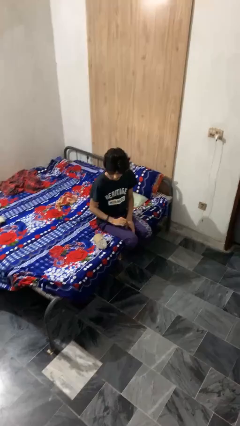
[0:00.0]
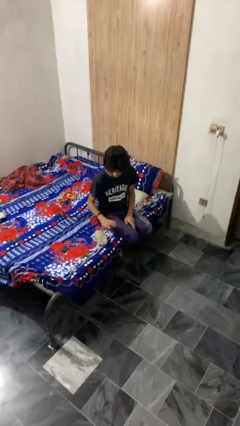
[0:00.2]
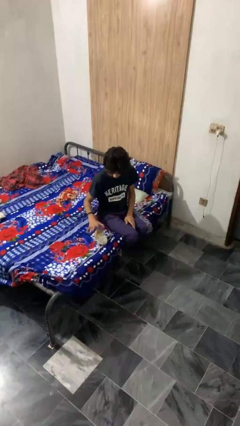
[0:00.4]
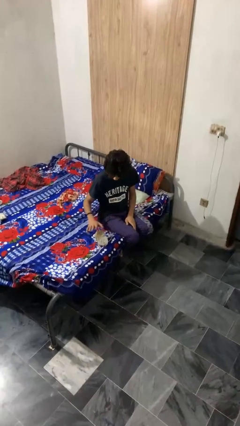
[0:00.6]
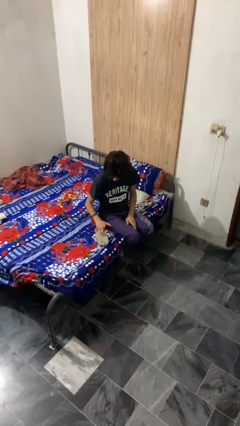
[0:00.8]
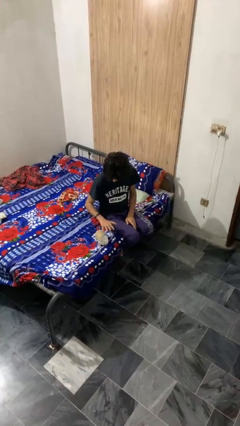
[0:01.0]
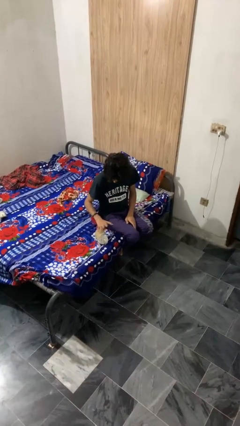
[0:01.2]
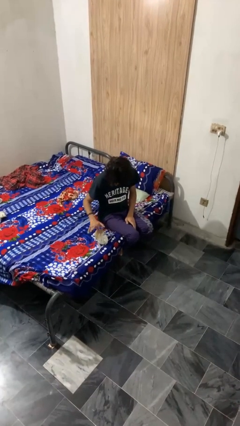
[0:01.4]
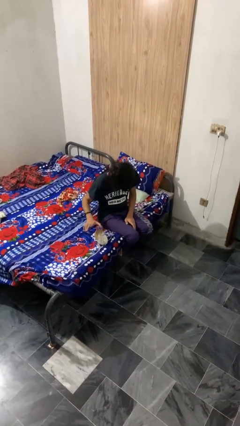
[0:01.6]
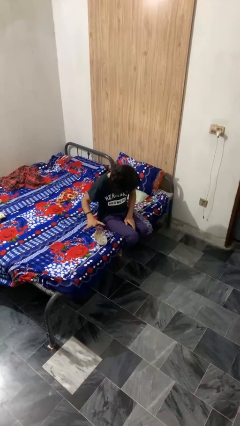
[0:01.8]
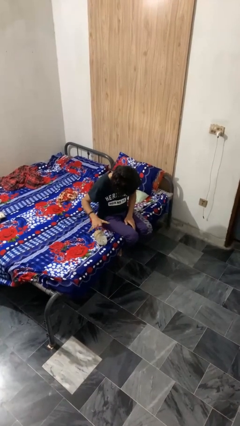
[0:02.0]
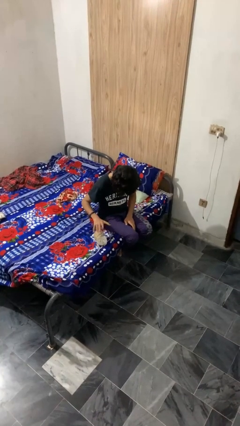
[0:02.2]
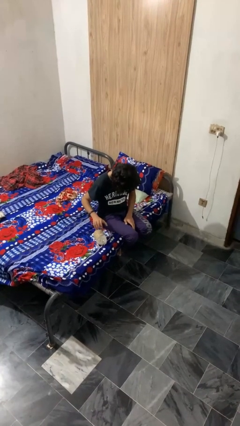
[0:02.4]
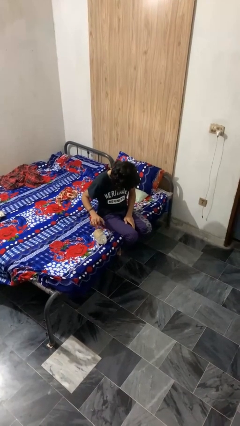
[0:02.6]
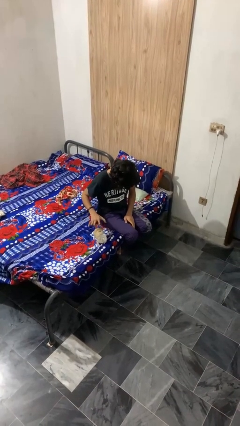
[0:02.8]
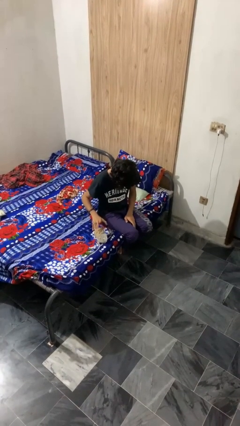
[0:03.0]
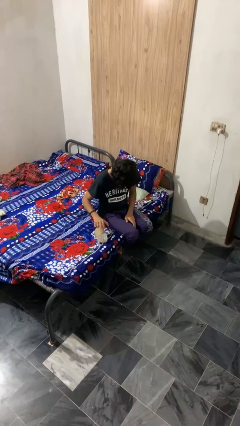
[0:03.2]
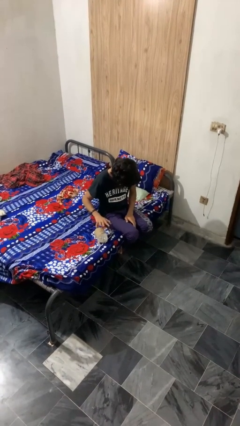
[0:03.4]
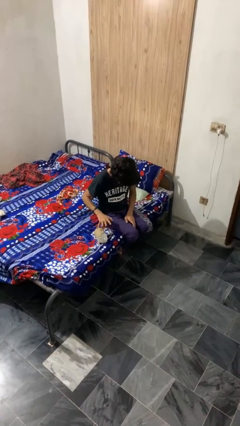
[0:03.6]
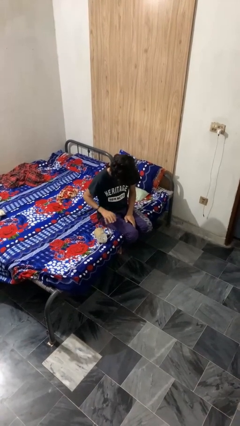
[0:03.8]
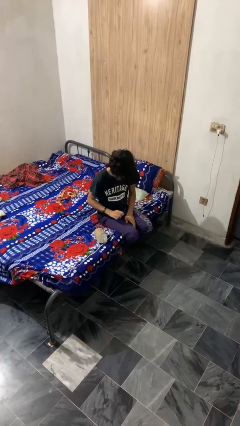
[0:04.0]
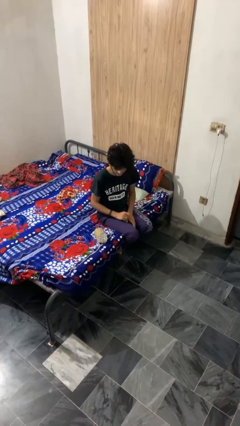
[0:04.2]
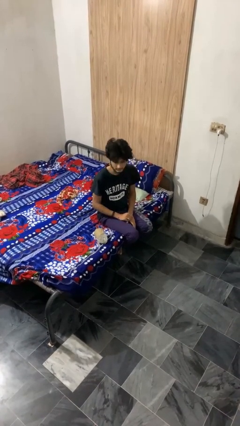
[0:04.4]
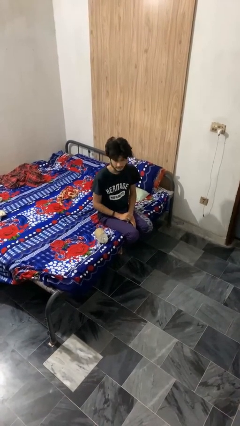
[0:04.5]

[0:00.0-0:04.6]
person waves hand over object

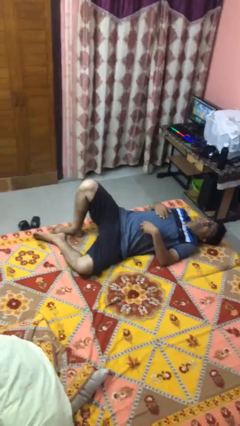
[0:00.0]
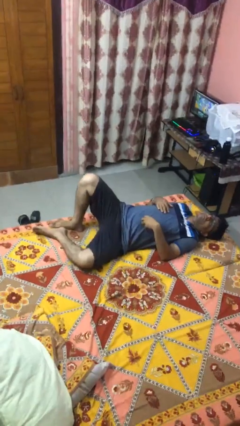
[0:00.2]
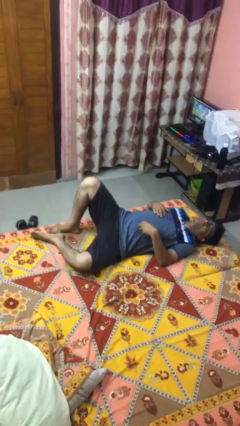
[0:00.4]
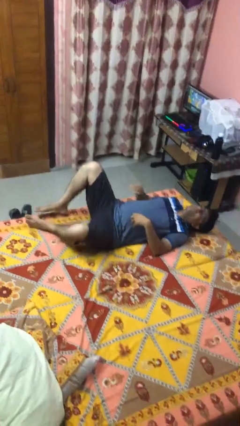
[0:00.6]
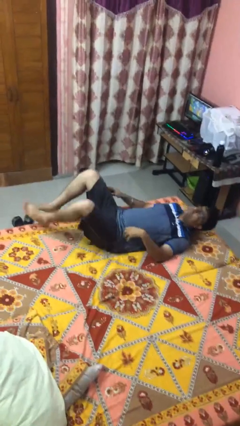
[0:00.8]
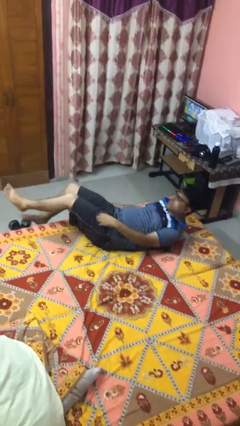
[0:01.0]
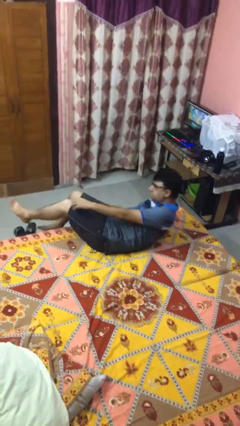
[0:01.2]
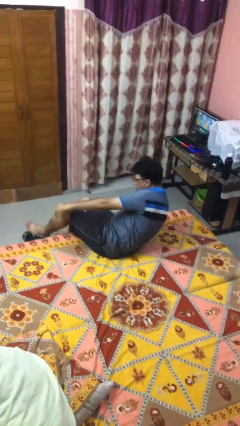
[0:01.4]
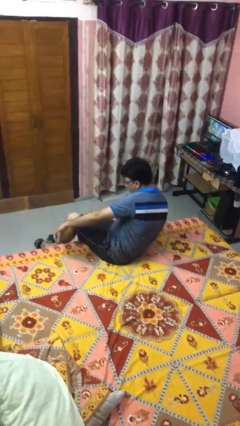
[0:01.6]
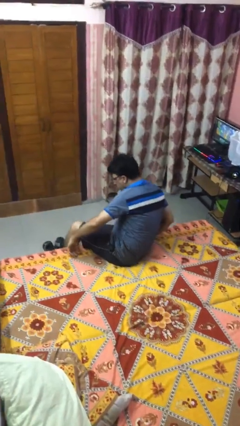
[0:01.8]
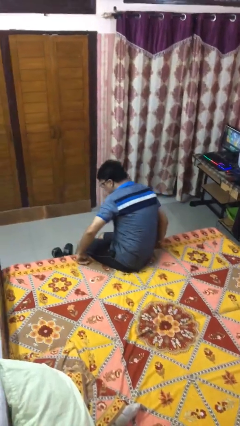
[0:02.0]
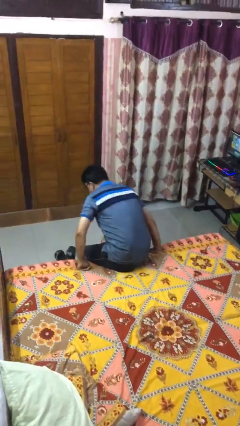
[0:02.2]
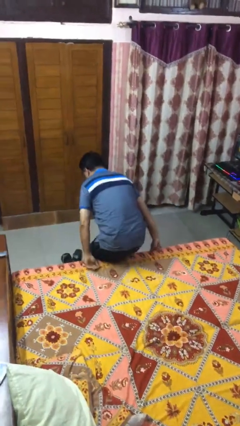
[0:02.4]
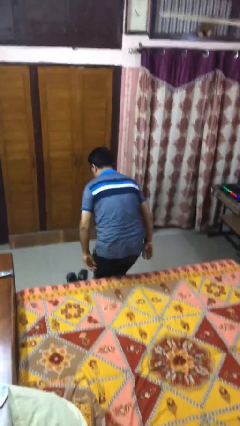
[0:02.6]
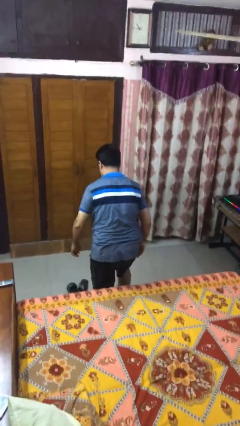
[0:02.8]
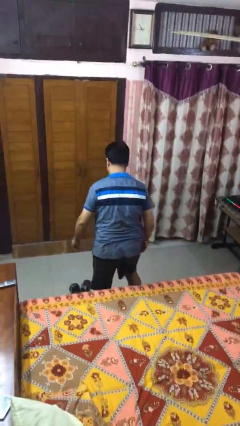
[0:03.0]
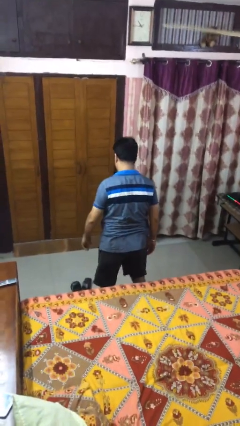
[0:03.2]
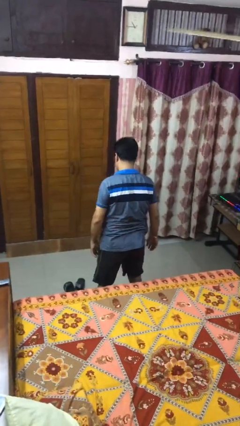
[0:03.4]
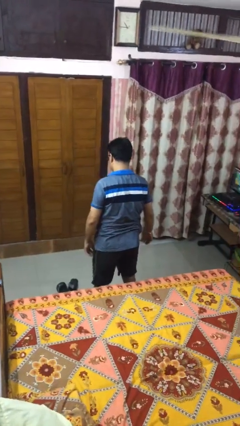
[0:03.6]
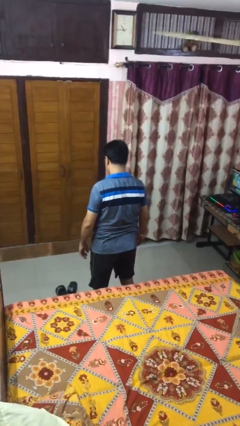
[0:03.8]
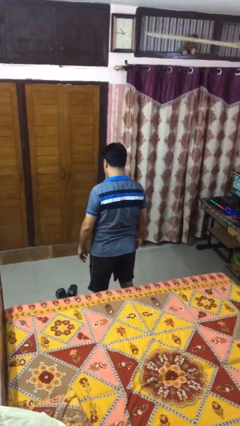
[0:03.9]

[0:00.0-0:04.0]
person stands up

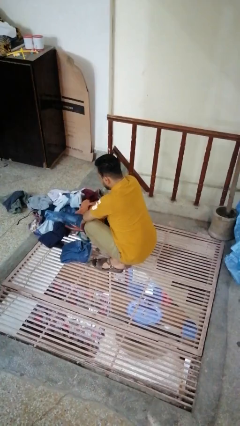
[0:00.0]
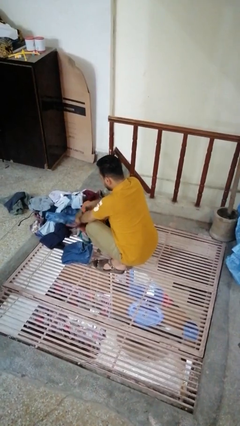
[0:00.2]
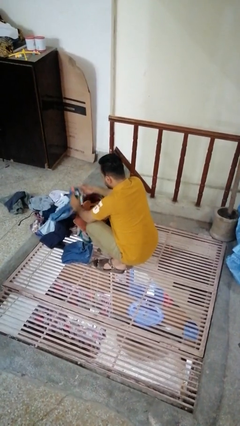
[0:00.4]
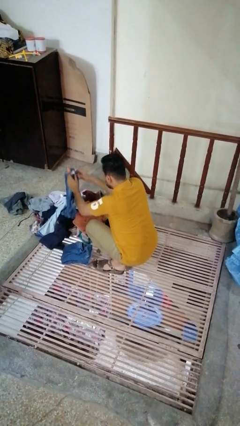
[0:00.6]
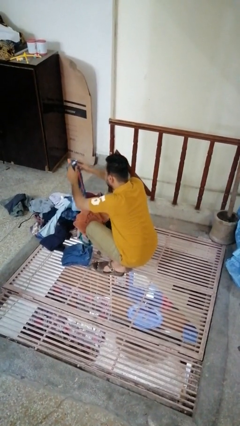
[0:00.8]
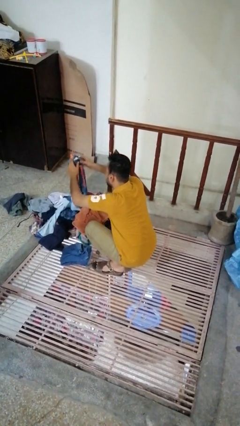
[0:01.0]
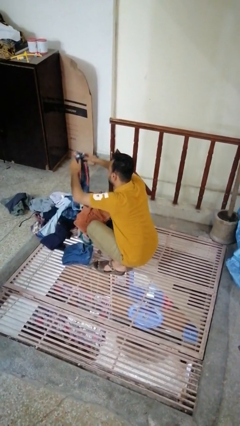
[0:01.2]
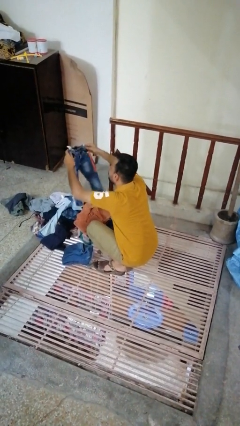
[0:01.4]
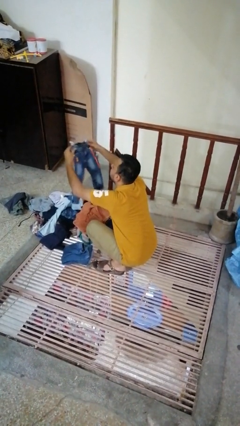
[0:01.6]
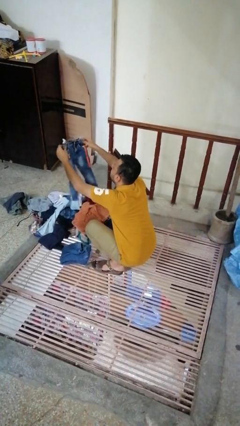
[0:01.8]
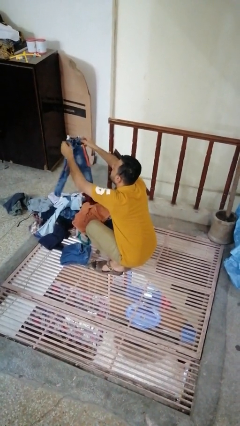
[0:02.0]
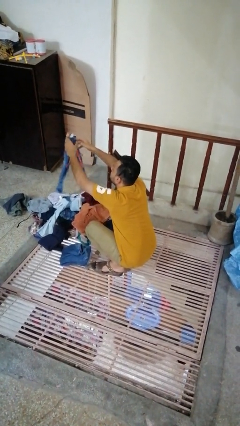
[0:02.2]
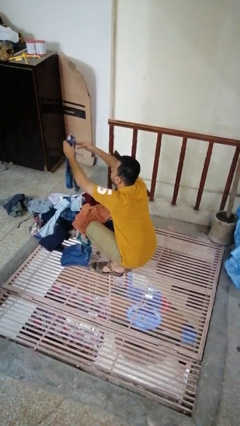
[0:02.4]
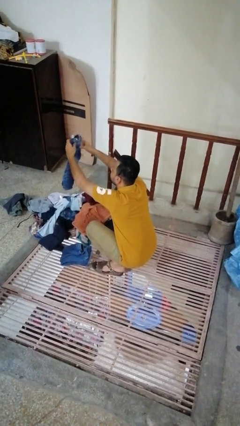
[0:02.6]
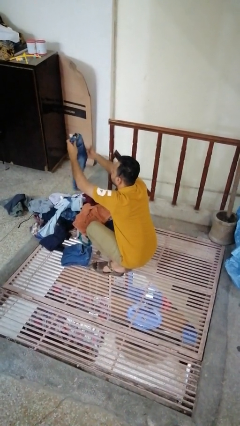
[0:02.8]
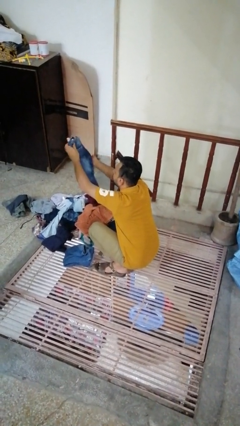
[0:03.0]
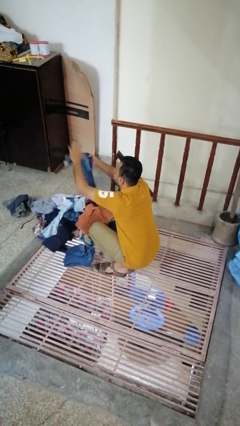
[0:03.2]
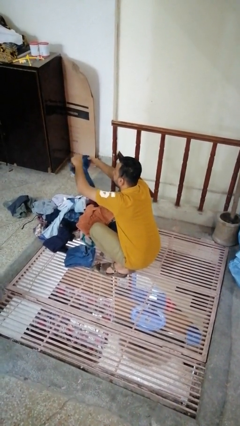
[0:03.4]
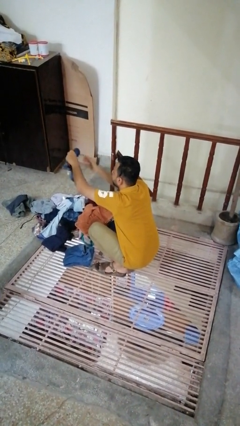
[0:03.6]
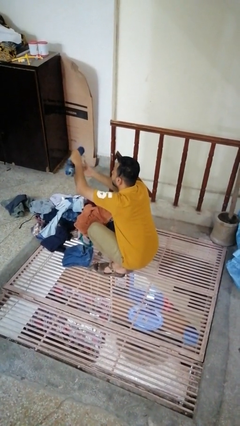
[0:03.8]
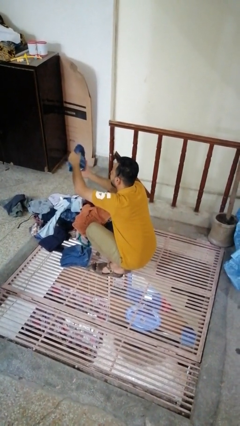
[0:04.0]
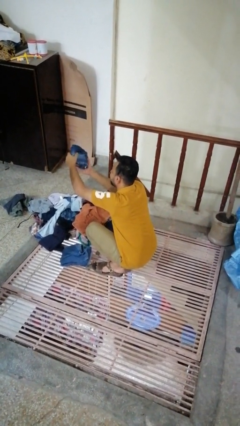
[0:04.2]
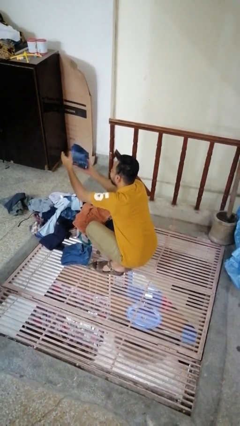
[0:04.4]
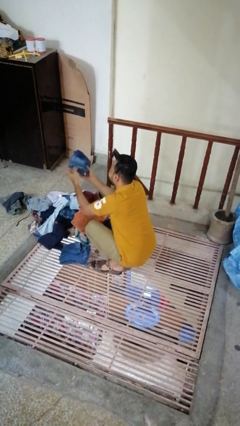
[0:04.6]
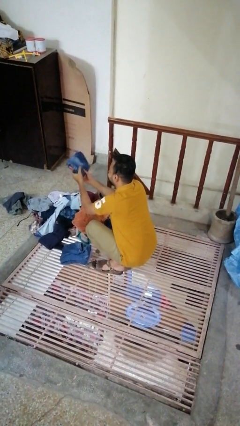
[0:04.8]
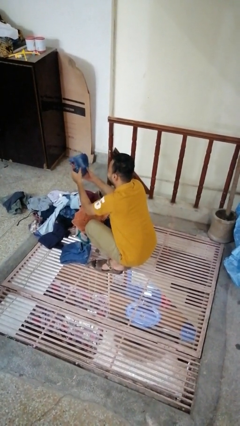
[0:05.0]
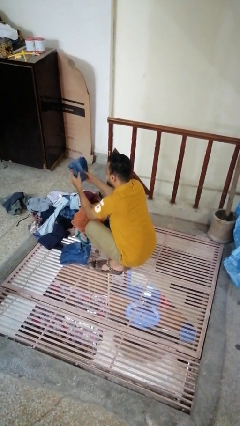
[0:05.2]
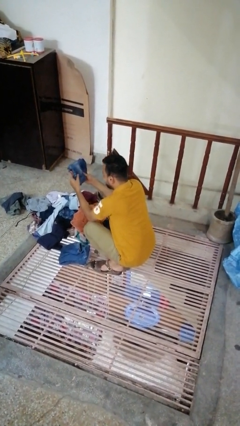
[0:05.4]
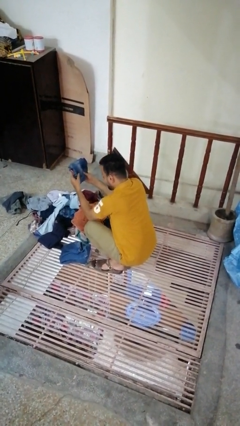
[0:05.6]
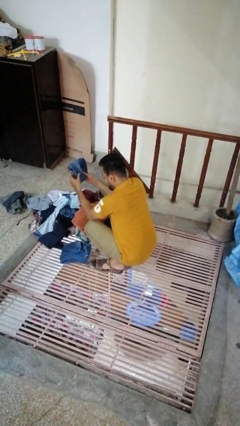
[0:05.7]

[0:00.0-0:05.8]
person folds pants

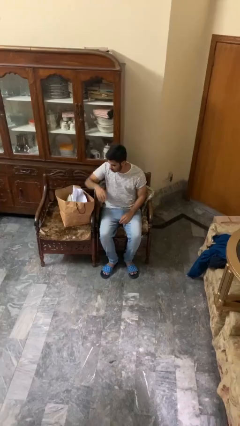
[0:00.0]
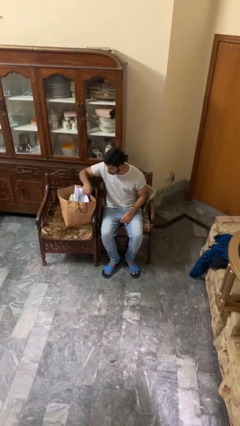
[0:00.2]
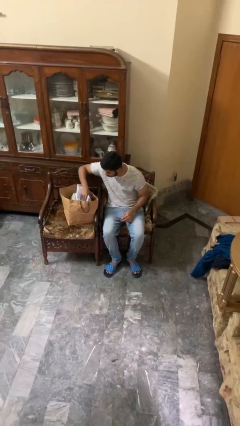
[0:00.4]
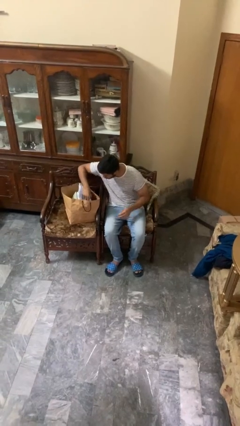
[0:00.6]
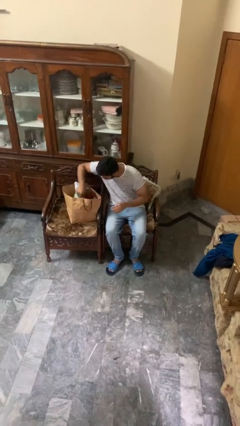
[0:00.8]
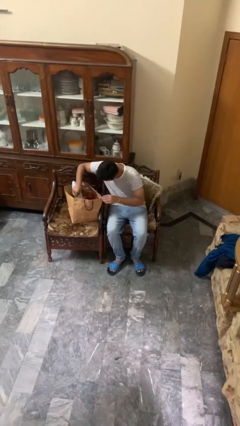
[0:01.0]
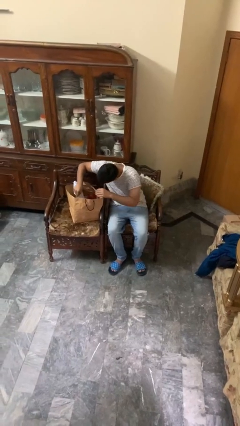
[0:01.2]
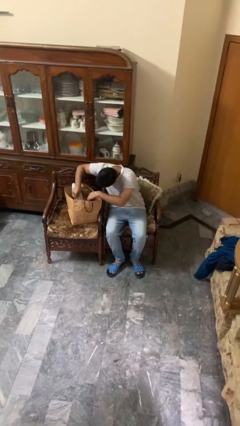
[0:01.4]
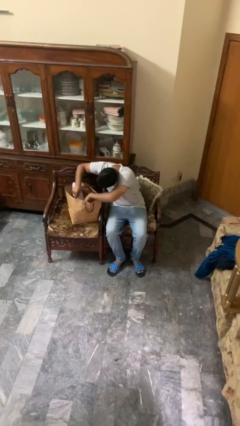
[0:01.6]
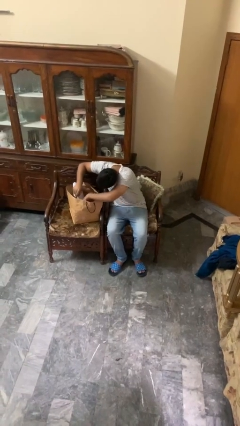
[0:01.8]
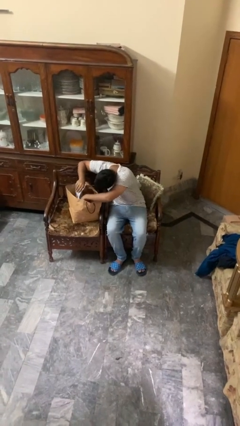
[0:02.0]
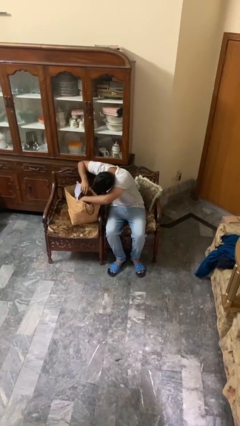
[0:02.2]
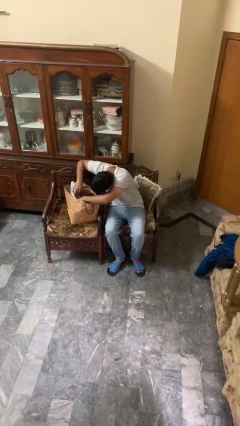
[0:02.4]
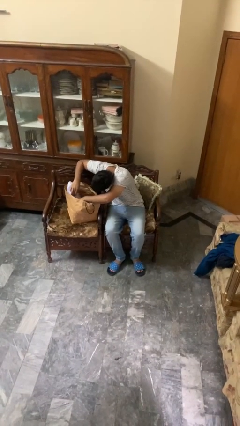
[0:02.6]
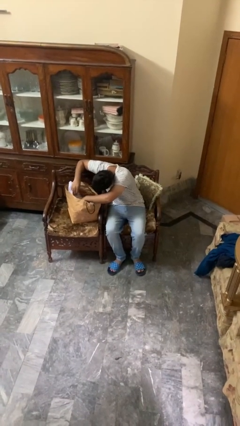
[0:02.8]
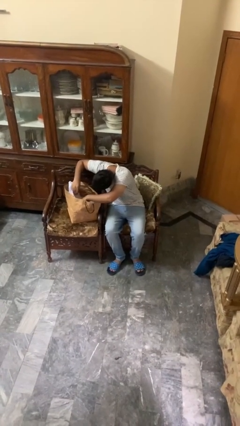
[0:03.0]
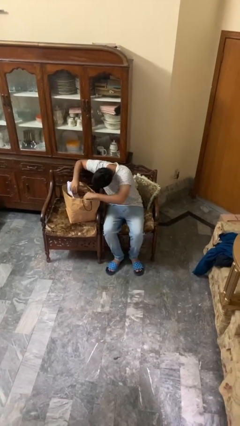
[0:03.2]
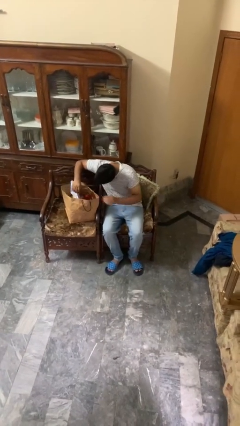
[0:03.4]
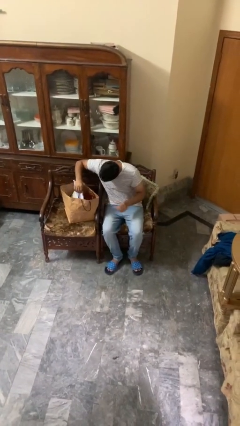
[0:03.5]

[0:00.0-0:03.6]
person searches in bag
